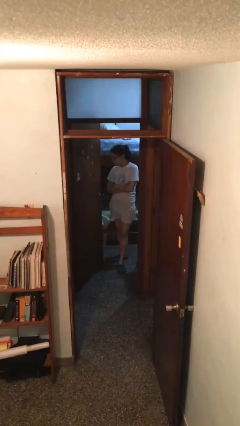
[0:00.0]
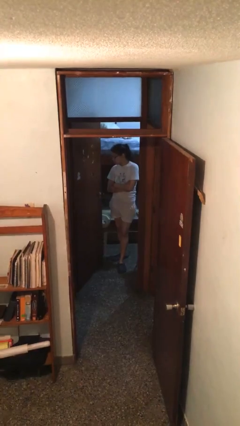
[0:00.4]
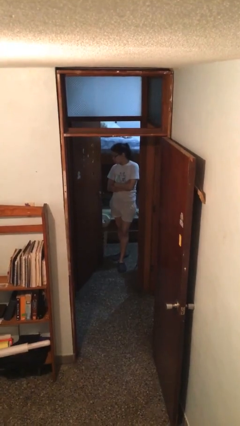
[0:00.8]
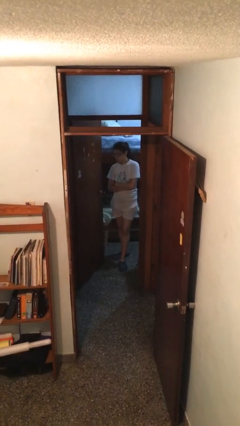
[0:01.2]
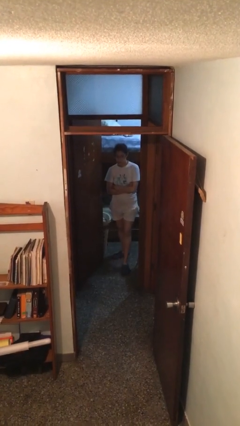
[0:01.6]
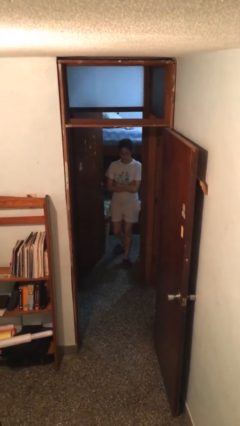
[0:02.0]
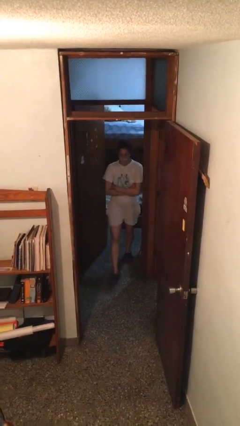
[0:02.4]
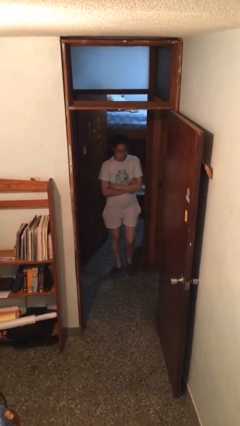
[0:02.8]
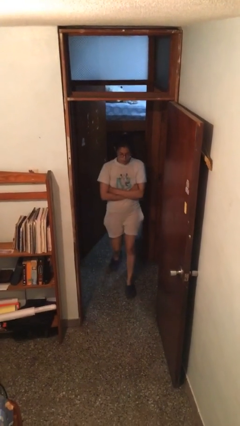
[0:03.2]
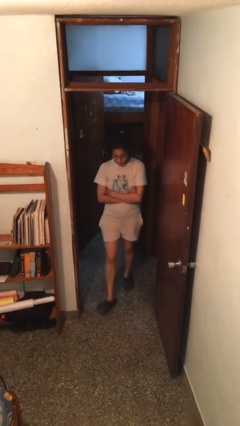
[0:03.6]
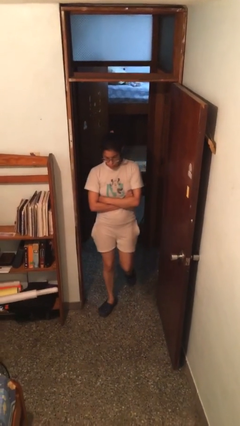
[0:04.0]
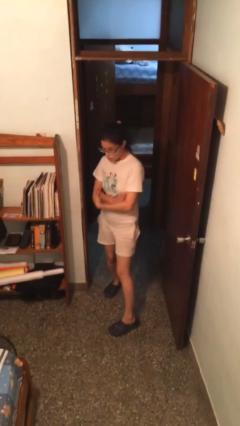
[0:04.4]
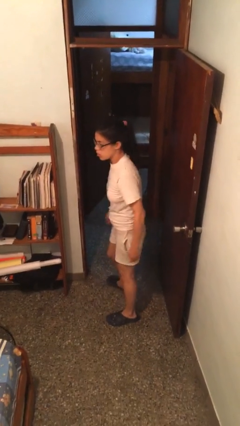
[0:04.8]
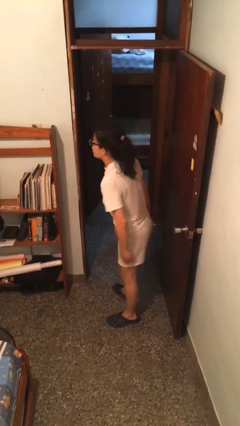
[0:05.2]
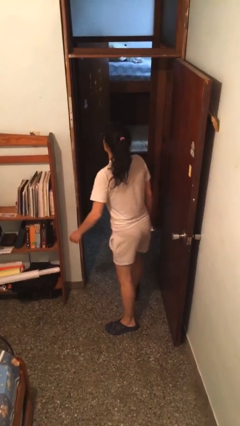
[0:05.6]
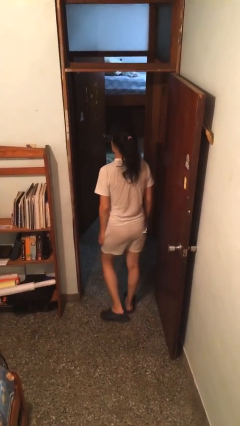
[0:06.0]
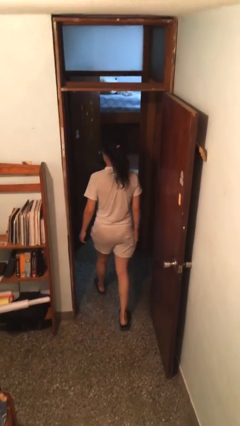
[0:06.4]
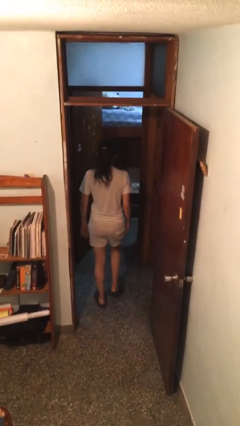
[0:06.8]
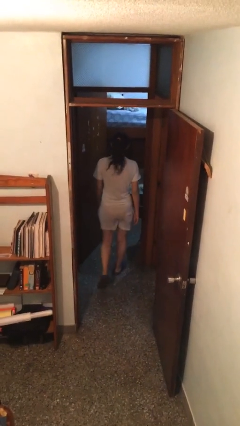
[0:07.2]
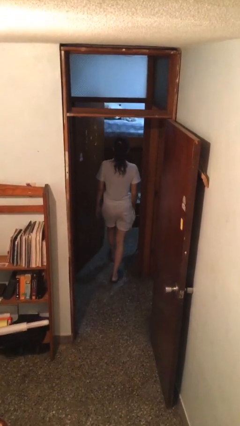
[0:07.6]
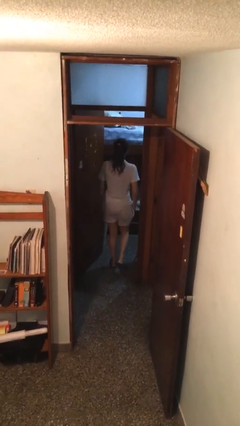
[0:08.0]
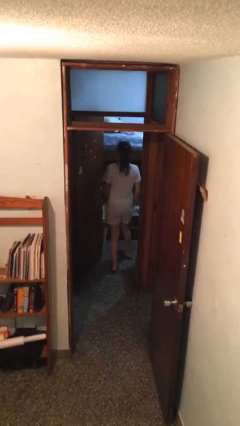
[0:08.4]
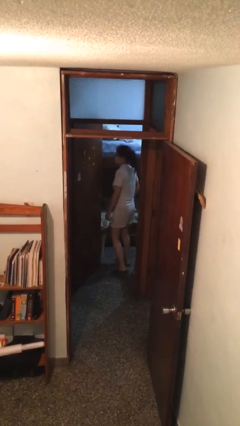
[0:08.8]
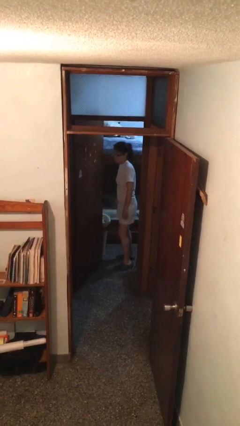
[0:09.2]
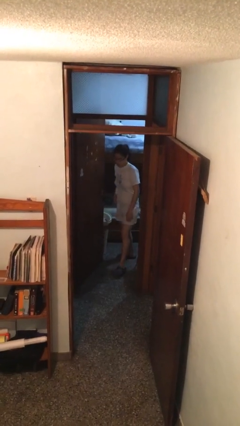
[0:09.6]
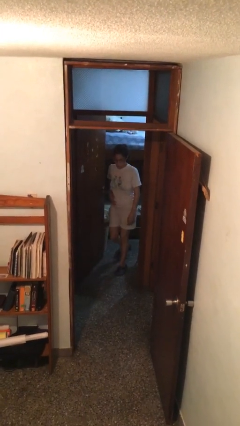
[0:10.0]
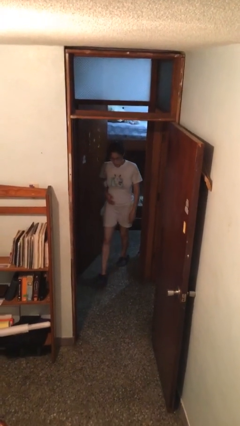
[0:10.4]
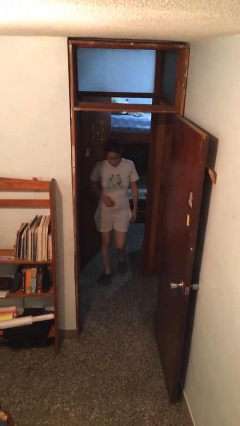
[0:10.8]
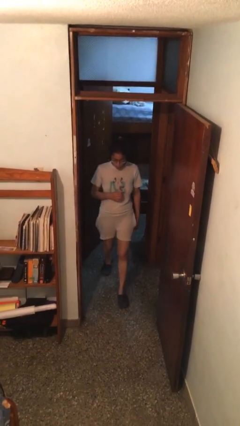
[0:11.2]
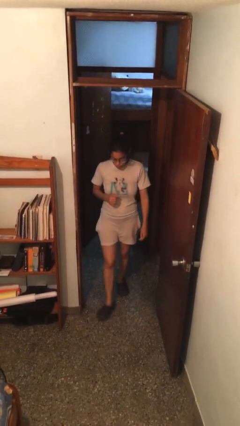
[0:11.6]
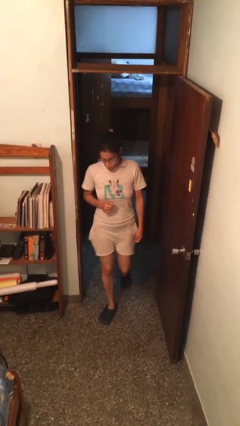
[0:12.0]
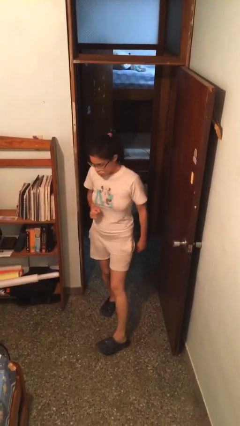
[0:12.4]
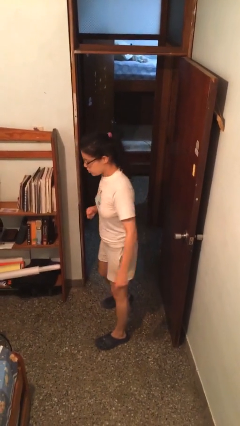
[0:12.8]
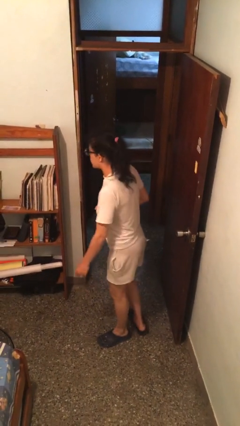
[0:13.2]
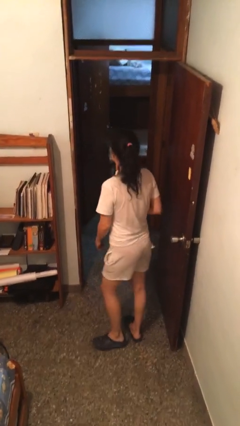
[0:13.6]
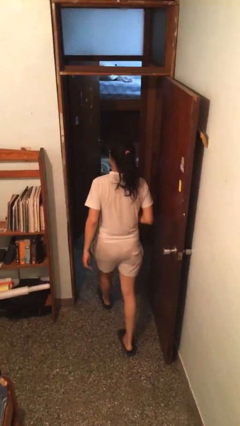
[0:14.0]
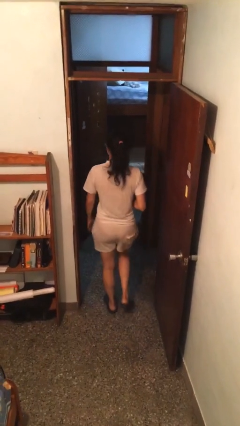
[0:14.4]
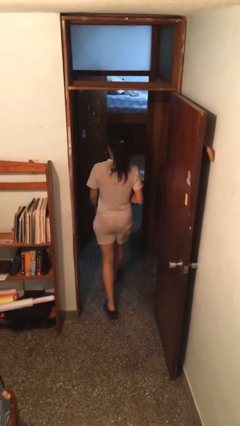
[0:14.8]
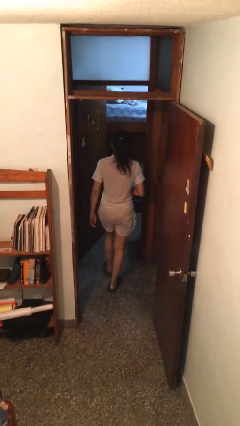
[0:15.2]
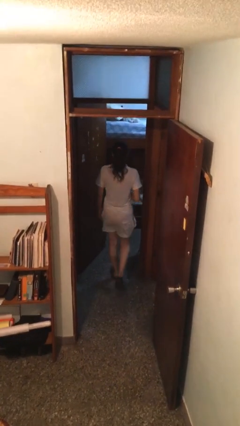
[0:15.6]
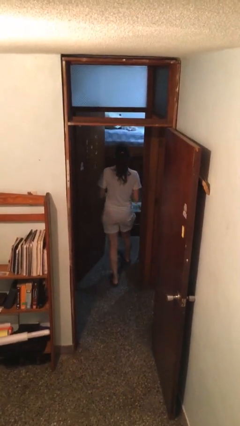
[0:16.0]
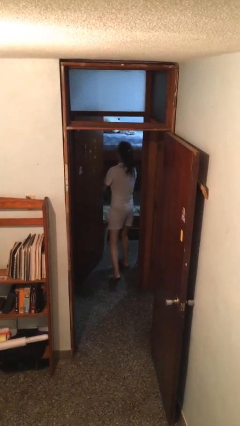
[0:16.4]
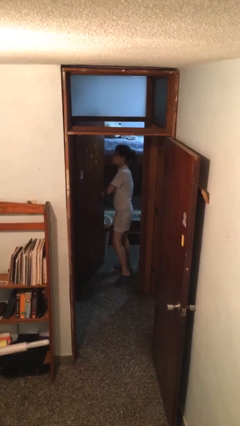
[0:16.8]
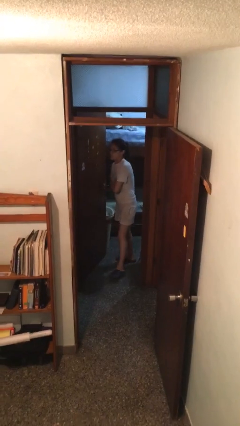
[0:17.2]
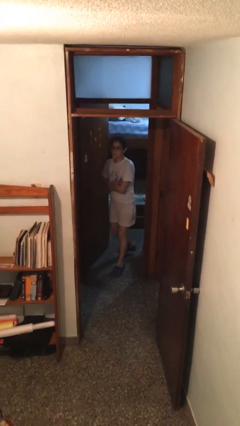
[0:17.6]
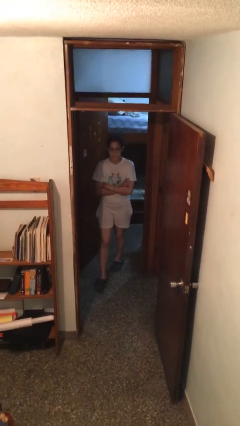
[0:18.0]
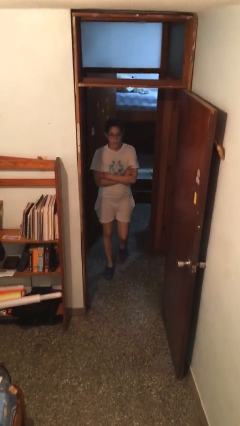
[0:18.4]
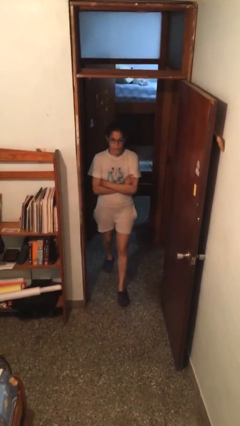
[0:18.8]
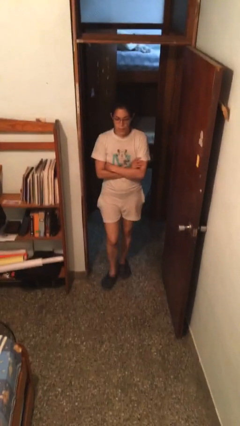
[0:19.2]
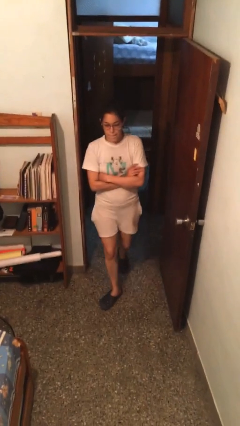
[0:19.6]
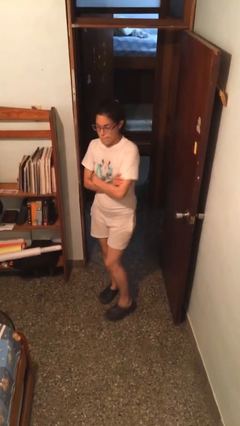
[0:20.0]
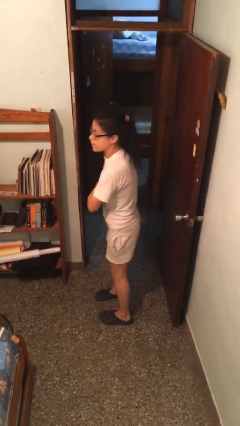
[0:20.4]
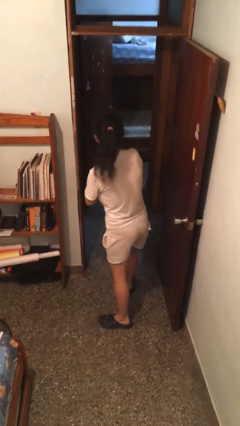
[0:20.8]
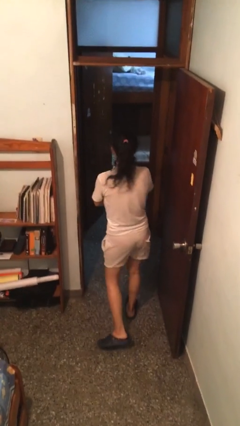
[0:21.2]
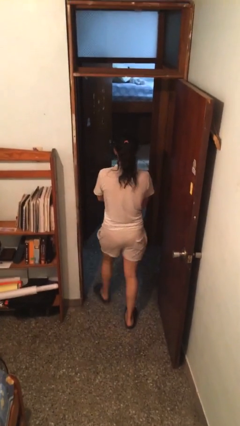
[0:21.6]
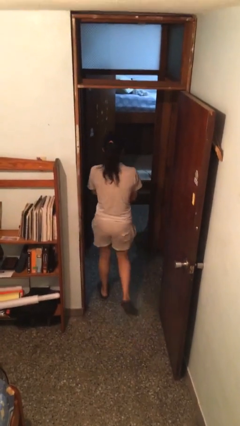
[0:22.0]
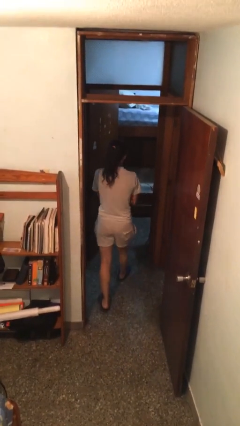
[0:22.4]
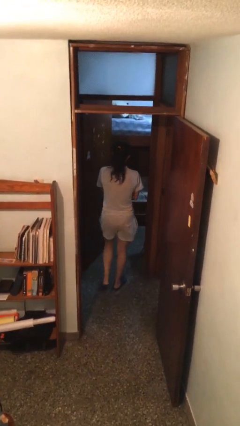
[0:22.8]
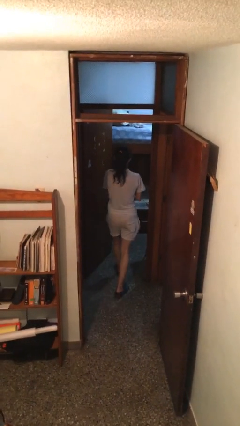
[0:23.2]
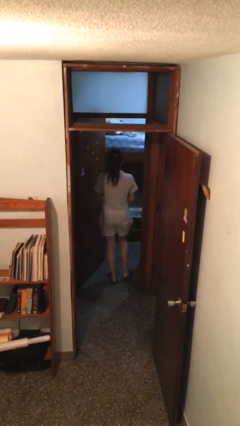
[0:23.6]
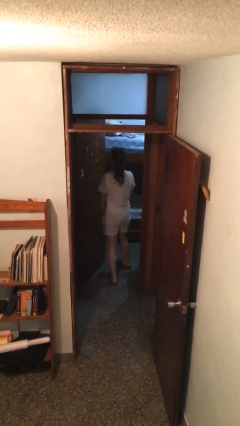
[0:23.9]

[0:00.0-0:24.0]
person walks

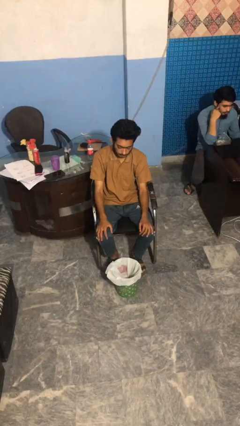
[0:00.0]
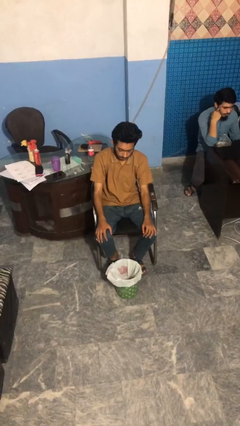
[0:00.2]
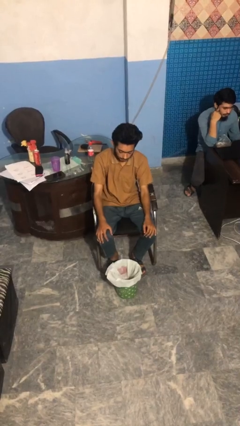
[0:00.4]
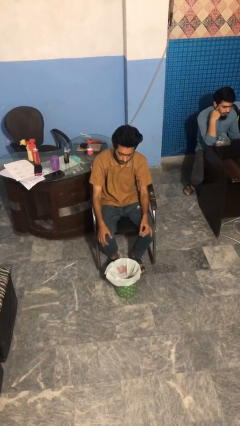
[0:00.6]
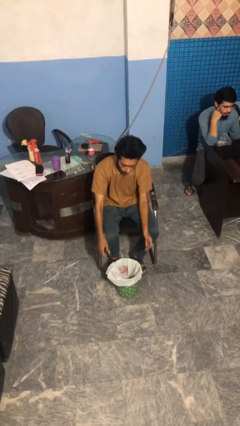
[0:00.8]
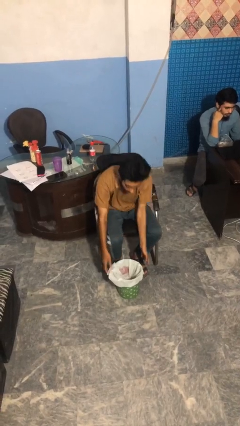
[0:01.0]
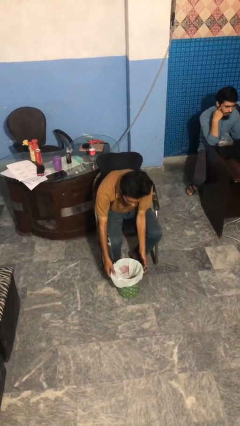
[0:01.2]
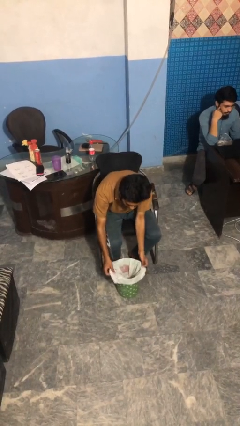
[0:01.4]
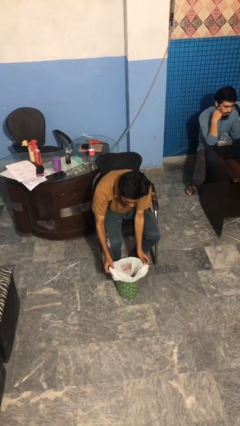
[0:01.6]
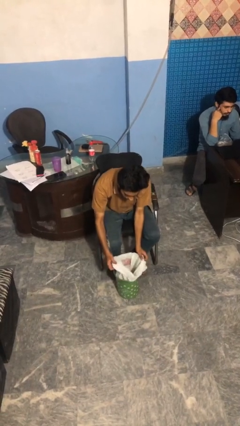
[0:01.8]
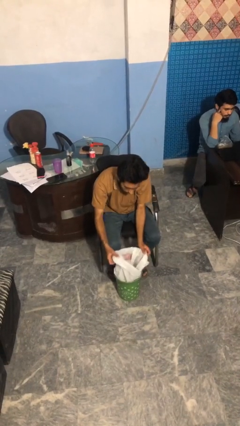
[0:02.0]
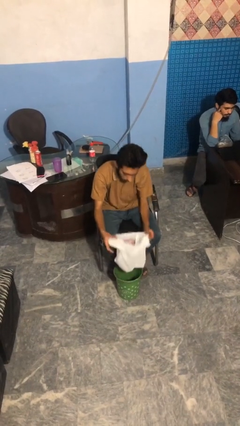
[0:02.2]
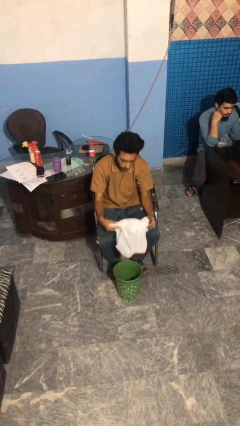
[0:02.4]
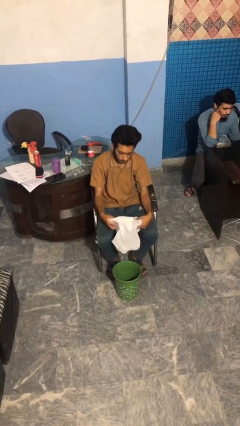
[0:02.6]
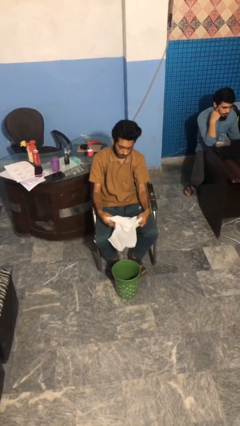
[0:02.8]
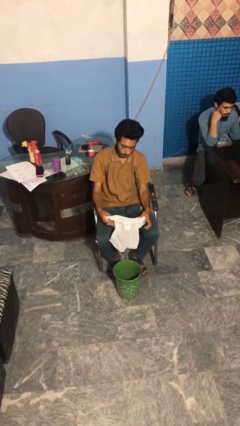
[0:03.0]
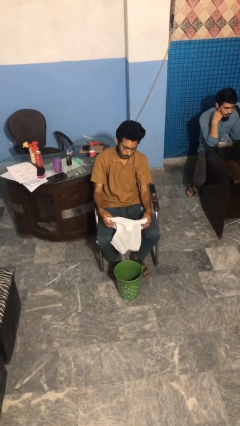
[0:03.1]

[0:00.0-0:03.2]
person removes trashbag from trashcan

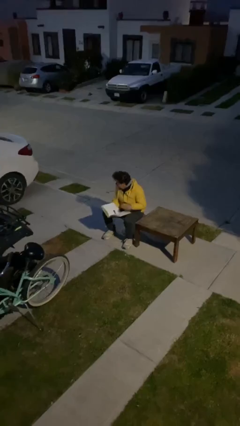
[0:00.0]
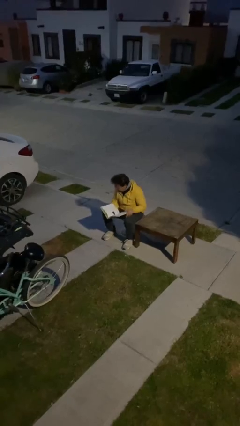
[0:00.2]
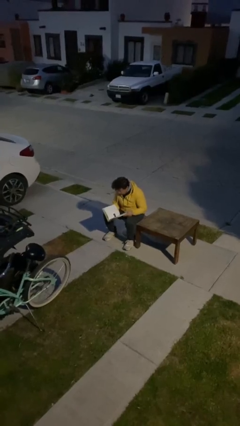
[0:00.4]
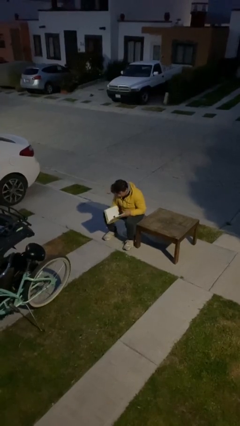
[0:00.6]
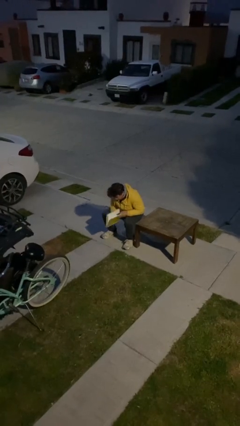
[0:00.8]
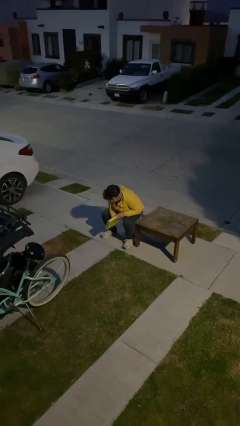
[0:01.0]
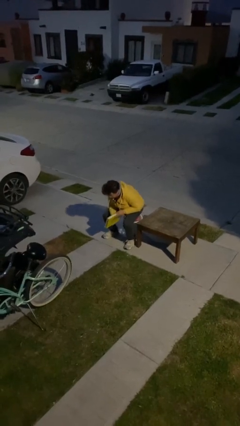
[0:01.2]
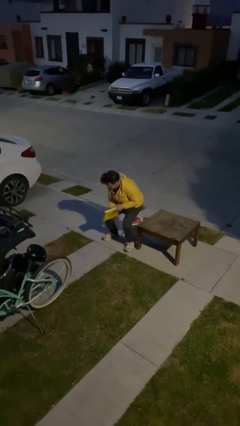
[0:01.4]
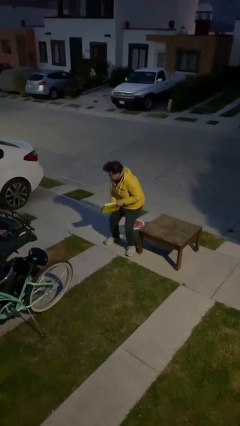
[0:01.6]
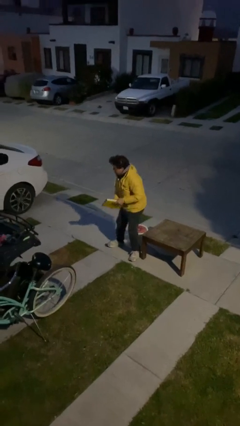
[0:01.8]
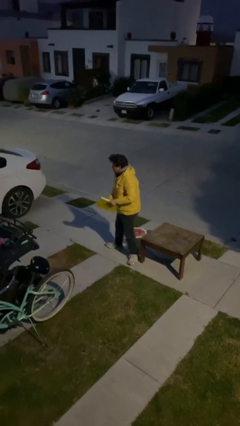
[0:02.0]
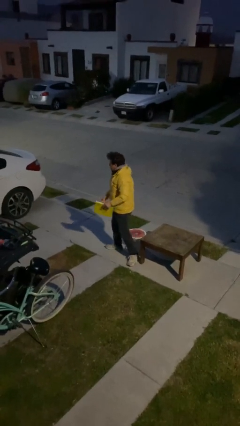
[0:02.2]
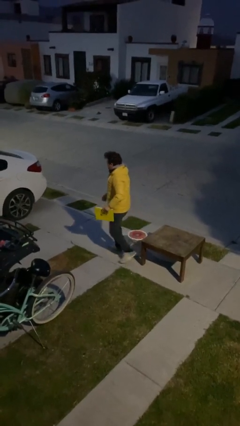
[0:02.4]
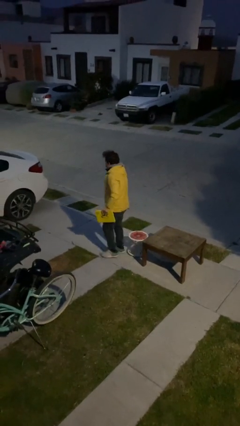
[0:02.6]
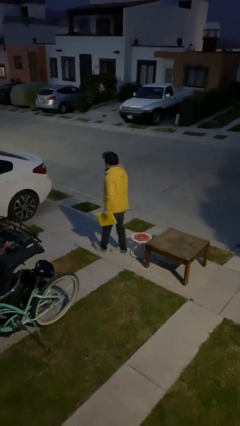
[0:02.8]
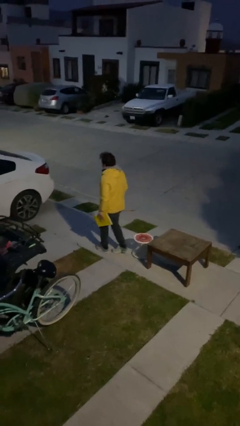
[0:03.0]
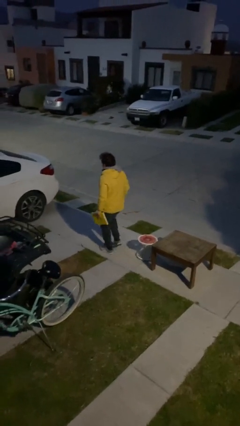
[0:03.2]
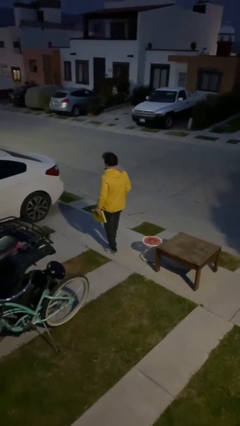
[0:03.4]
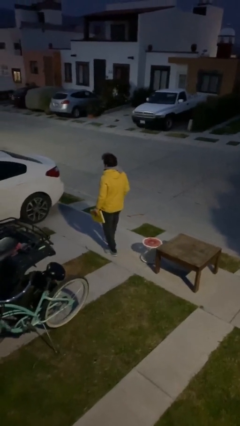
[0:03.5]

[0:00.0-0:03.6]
person stands up
